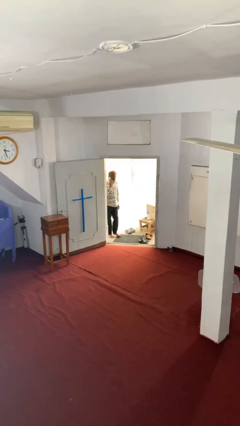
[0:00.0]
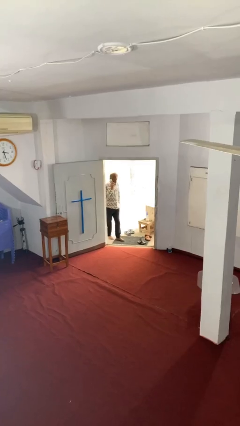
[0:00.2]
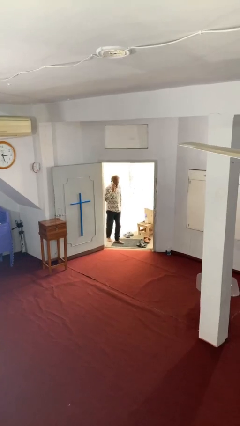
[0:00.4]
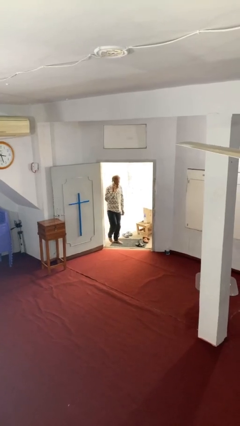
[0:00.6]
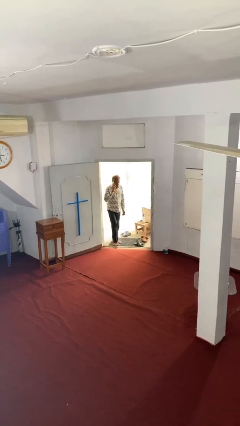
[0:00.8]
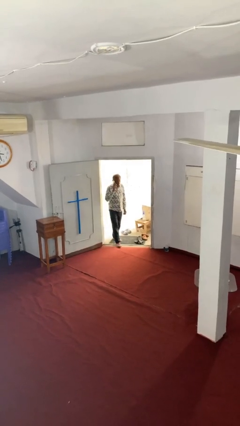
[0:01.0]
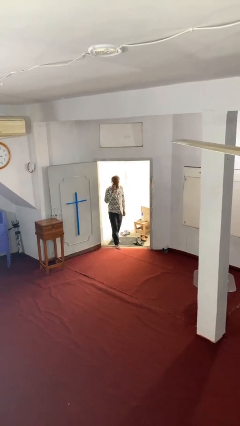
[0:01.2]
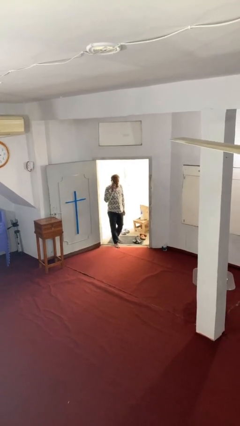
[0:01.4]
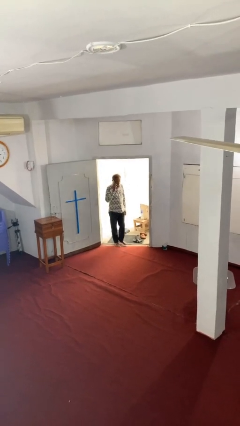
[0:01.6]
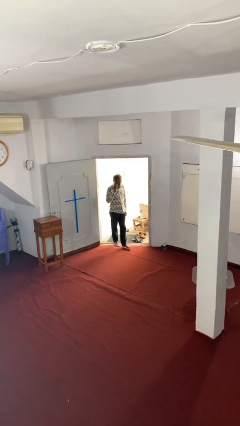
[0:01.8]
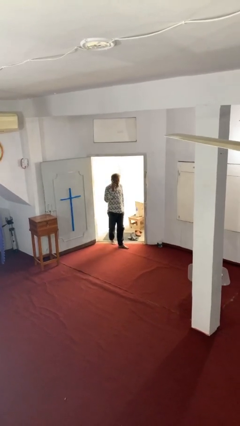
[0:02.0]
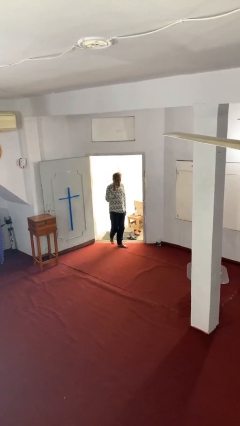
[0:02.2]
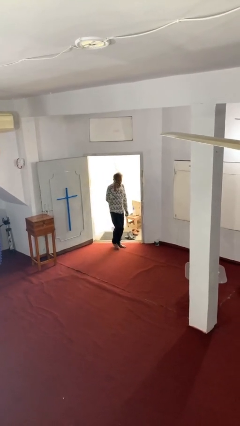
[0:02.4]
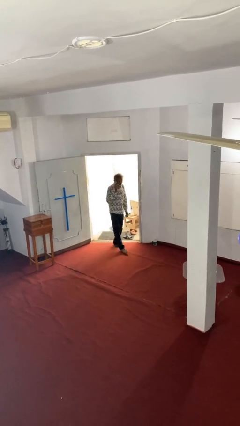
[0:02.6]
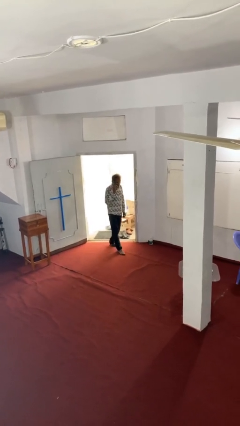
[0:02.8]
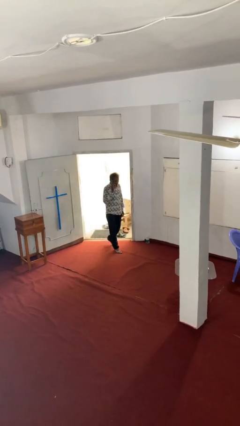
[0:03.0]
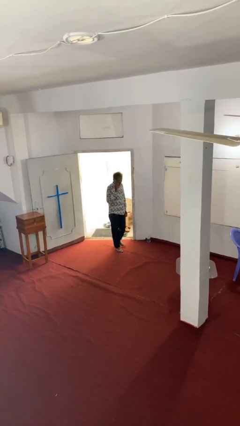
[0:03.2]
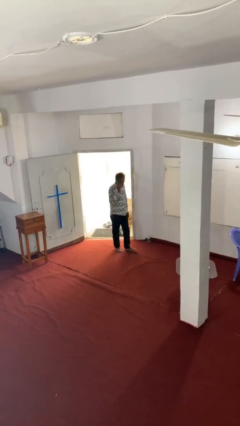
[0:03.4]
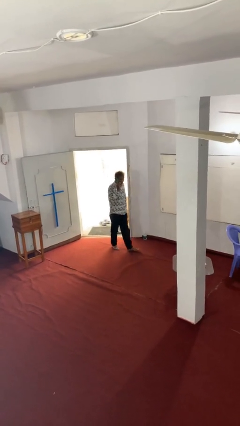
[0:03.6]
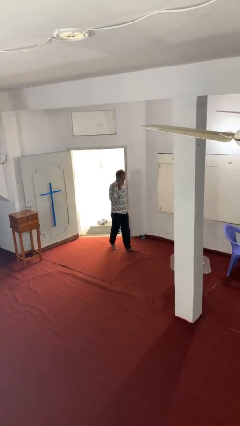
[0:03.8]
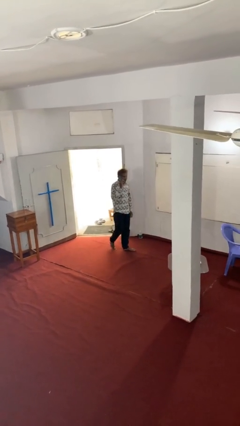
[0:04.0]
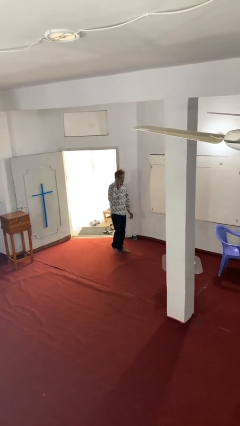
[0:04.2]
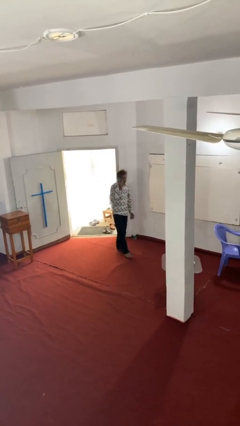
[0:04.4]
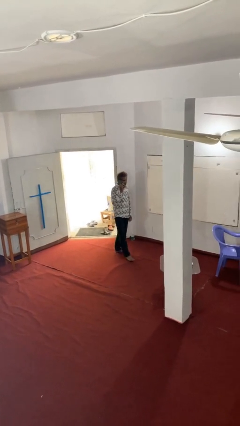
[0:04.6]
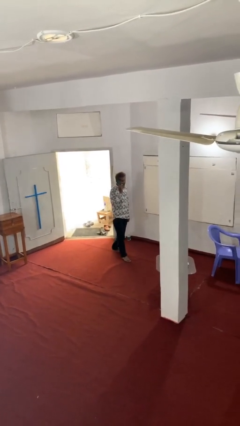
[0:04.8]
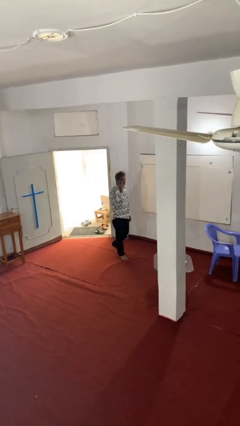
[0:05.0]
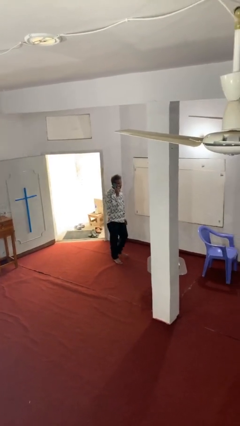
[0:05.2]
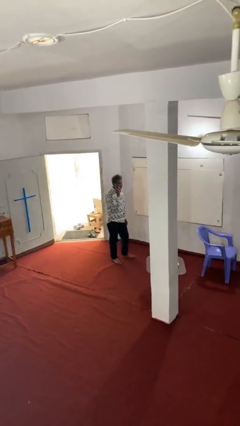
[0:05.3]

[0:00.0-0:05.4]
person enters scene through structure

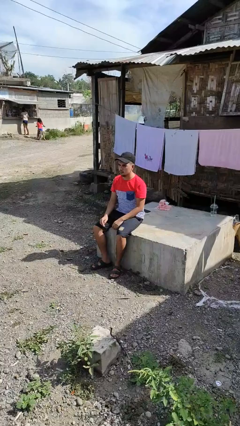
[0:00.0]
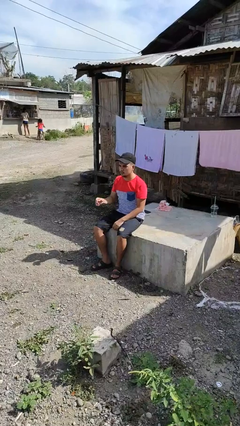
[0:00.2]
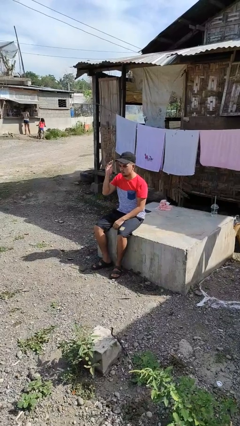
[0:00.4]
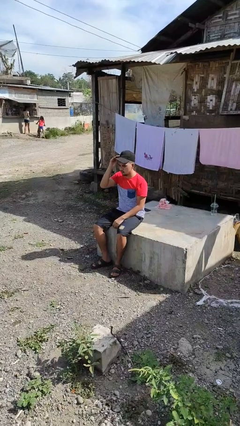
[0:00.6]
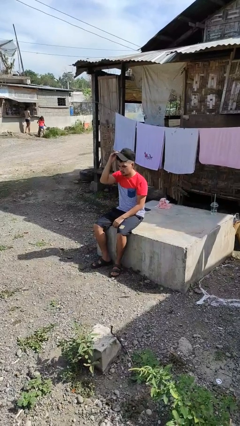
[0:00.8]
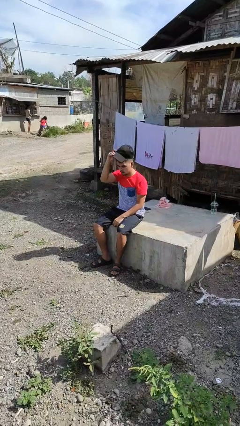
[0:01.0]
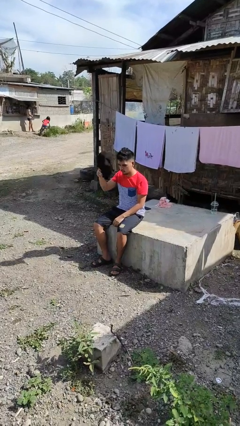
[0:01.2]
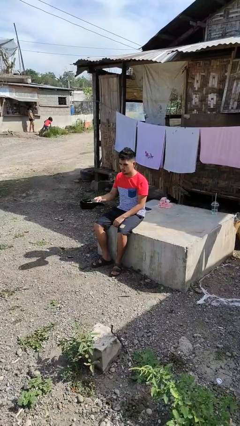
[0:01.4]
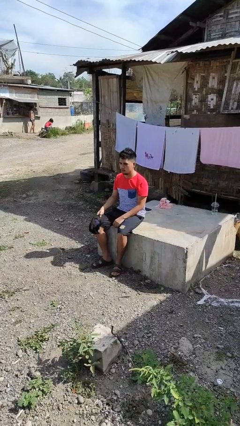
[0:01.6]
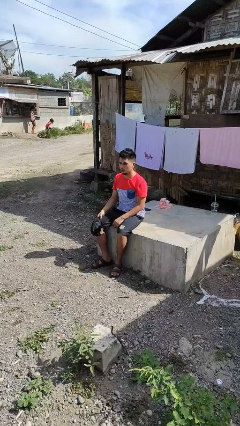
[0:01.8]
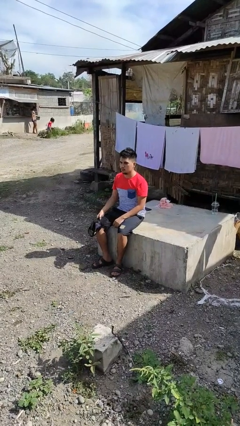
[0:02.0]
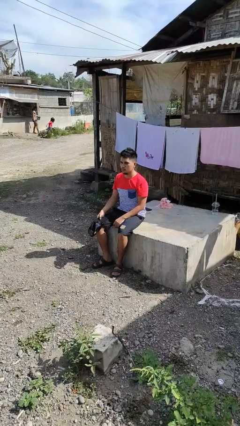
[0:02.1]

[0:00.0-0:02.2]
person takes off hat

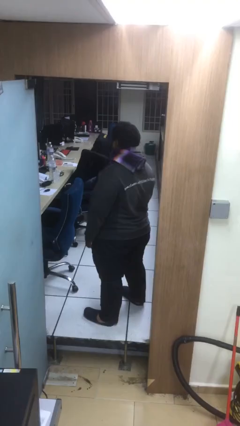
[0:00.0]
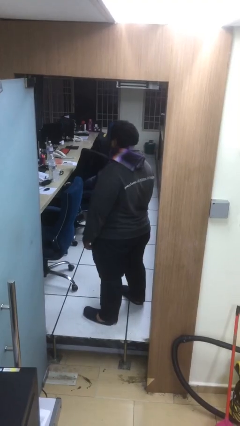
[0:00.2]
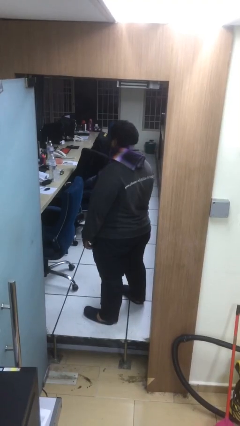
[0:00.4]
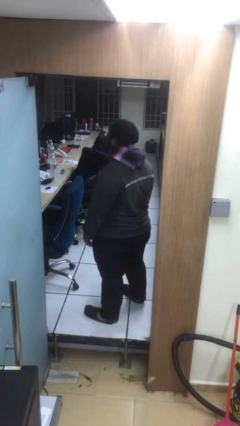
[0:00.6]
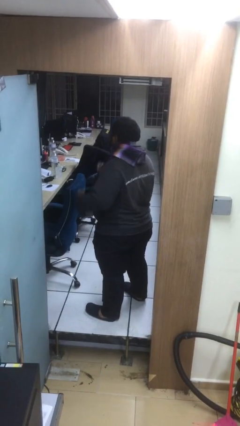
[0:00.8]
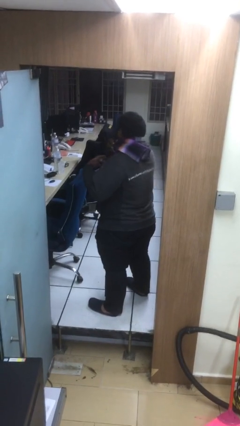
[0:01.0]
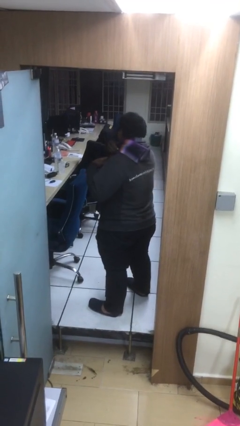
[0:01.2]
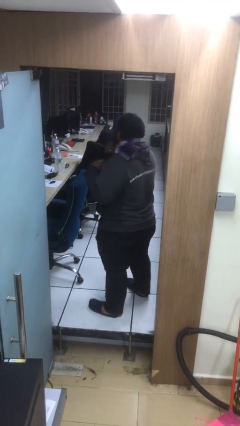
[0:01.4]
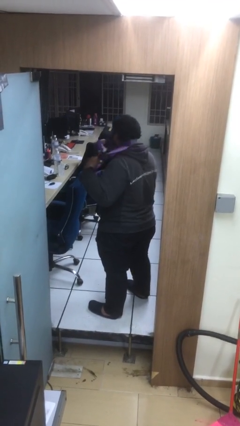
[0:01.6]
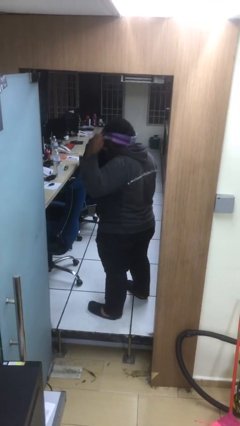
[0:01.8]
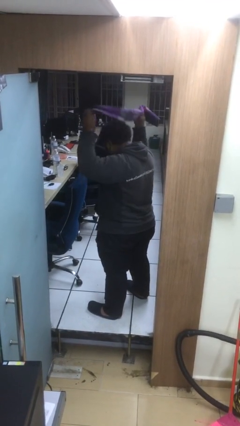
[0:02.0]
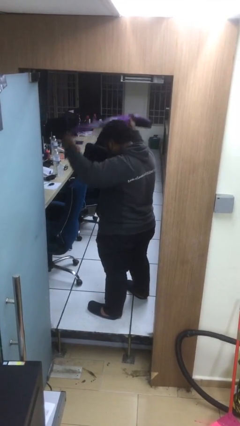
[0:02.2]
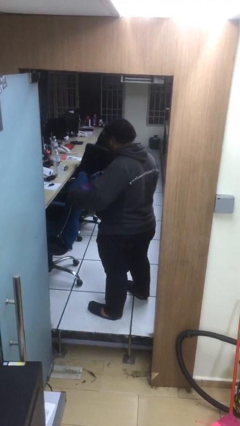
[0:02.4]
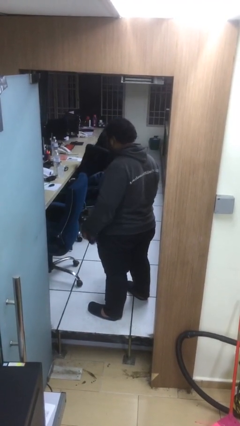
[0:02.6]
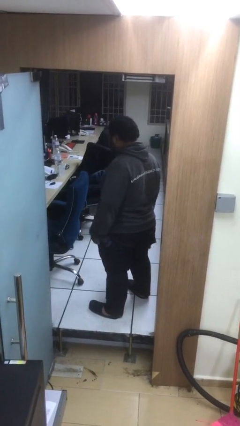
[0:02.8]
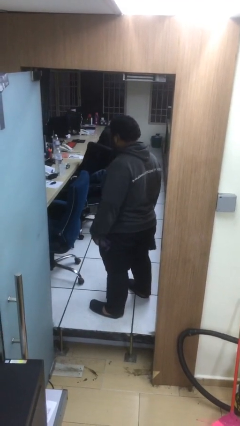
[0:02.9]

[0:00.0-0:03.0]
person takes off scarf

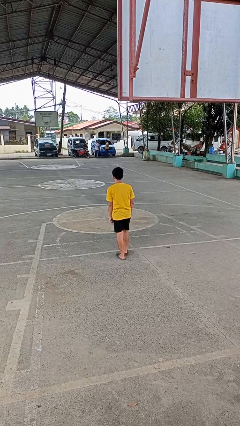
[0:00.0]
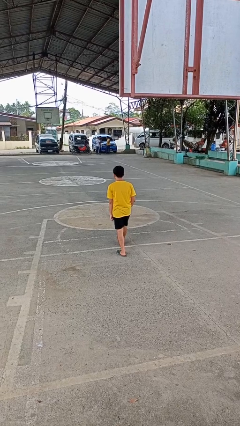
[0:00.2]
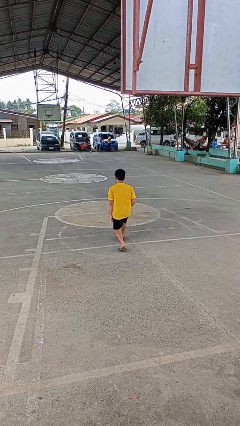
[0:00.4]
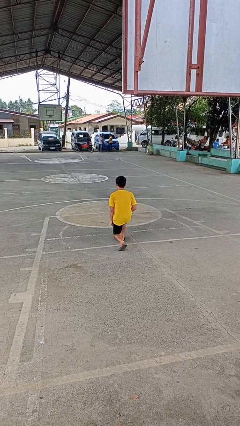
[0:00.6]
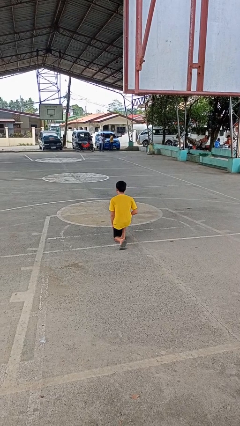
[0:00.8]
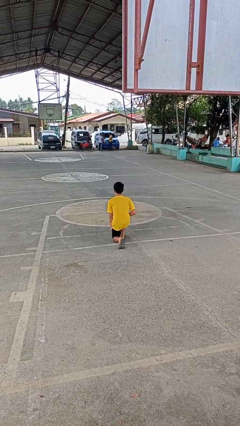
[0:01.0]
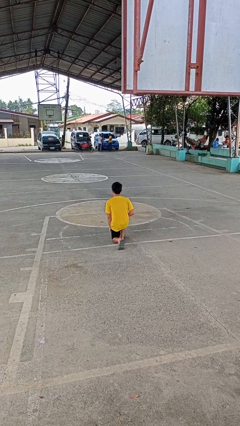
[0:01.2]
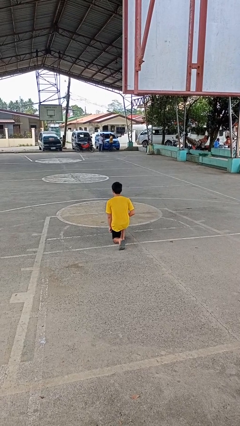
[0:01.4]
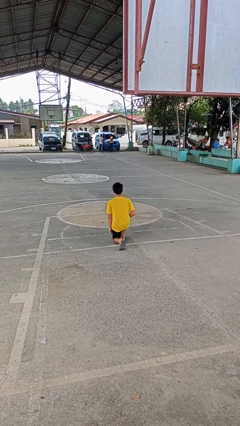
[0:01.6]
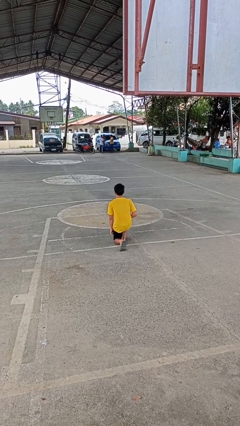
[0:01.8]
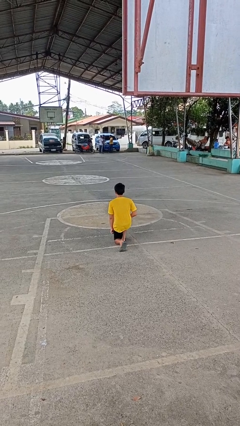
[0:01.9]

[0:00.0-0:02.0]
person kneels

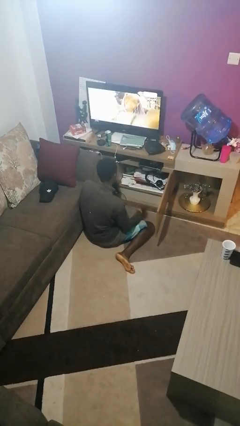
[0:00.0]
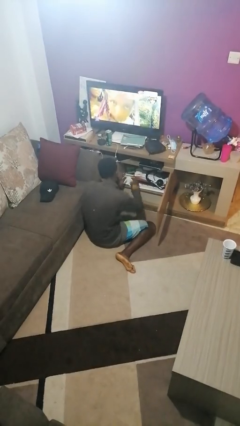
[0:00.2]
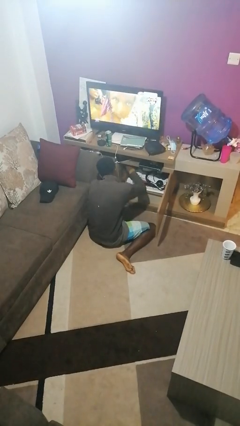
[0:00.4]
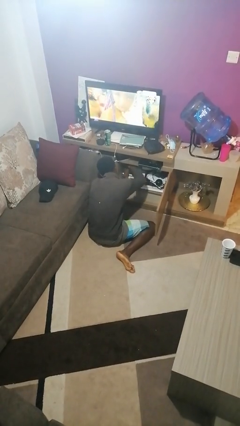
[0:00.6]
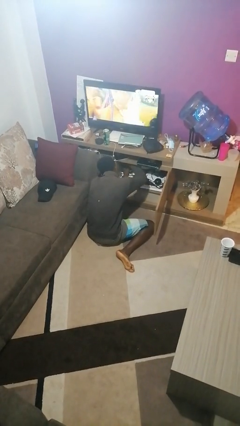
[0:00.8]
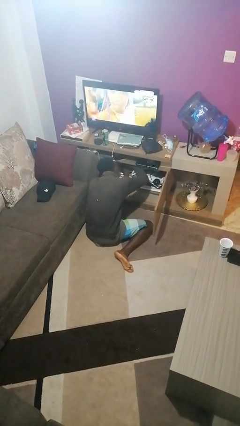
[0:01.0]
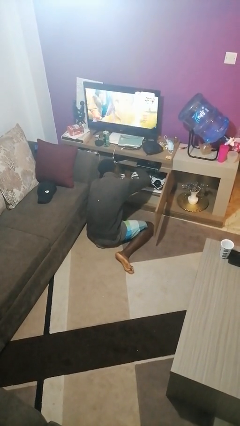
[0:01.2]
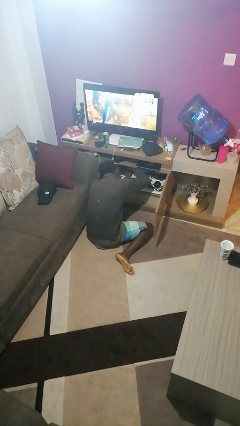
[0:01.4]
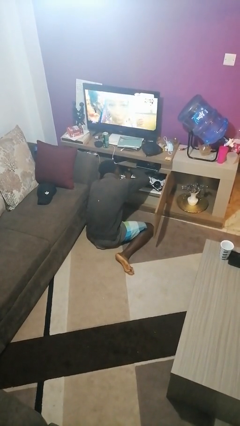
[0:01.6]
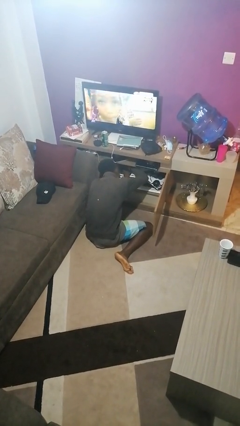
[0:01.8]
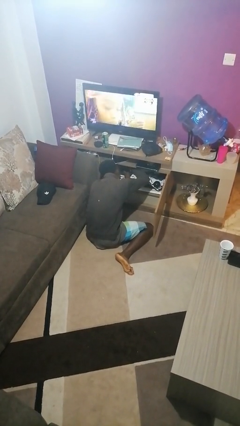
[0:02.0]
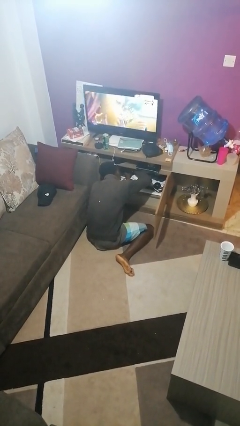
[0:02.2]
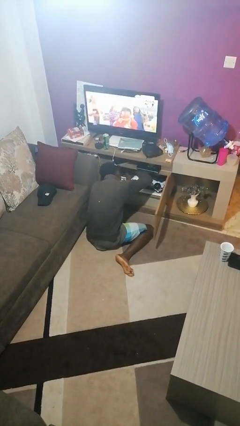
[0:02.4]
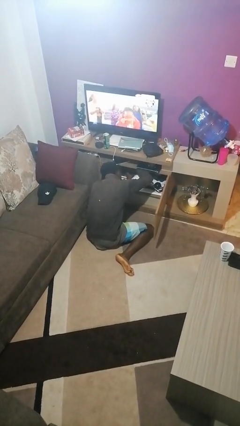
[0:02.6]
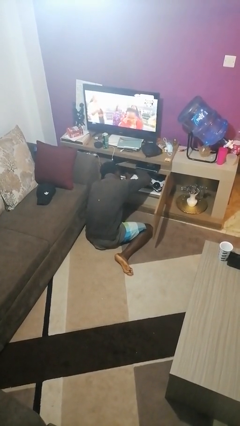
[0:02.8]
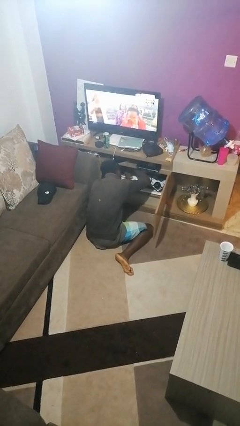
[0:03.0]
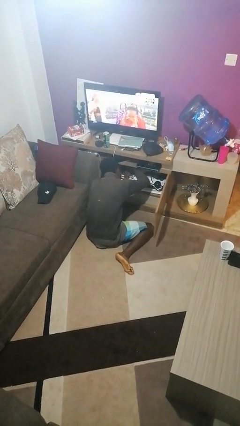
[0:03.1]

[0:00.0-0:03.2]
person searches in cabinet

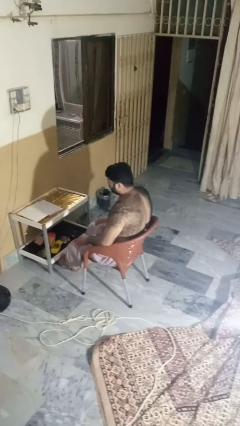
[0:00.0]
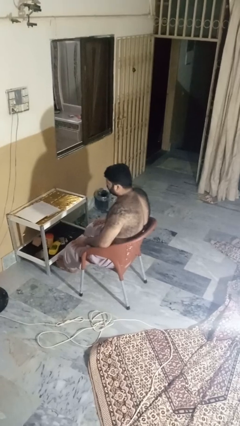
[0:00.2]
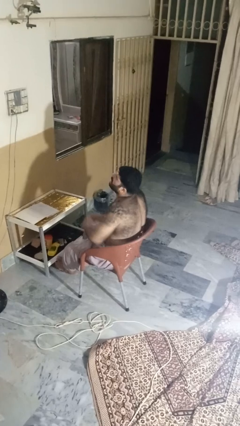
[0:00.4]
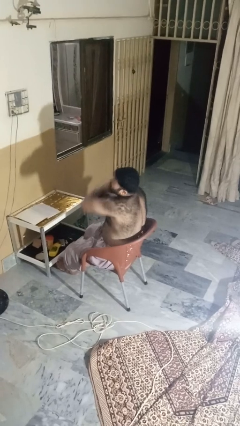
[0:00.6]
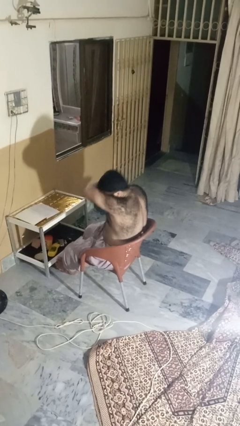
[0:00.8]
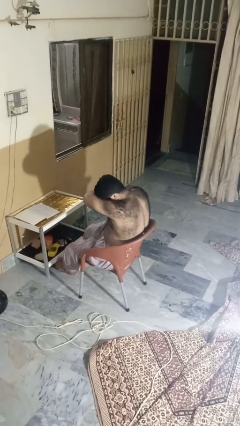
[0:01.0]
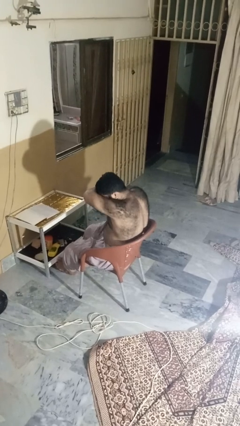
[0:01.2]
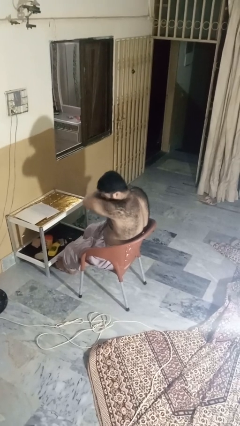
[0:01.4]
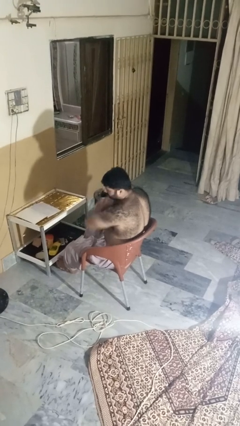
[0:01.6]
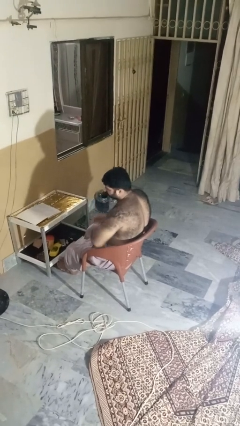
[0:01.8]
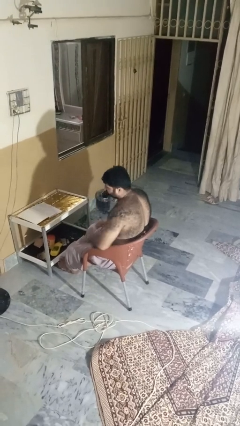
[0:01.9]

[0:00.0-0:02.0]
person sneezes into arm
